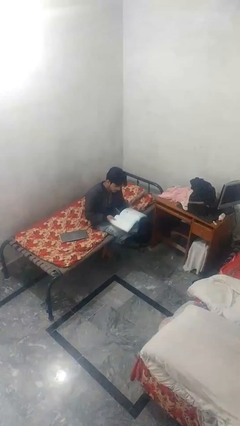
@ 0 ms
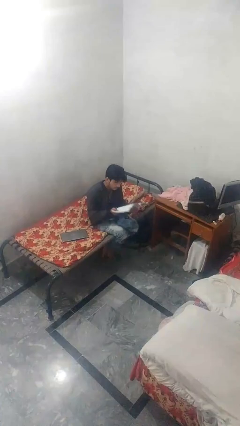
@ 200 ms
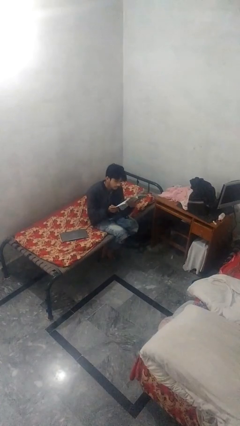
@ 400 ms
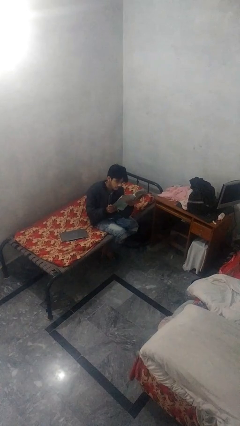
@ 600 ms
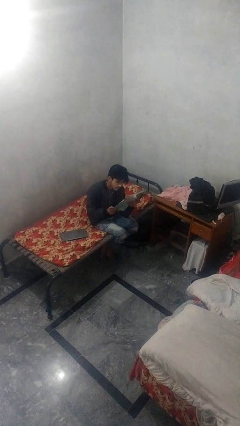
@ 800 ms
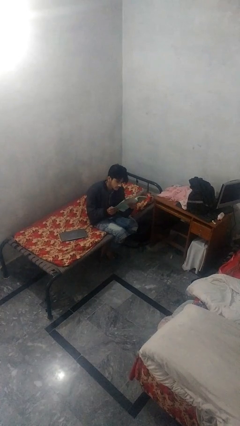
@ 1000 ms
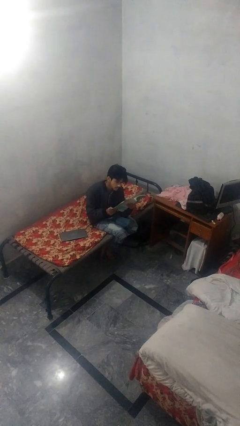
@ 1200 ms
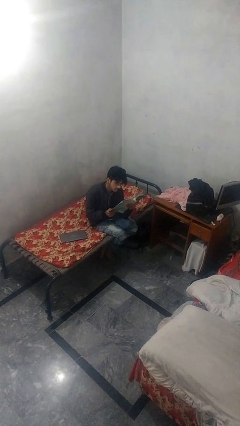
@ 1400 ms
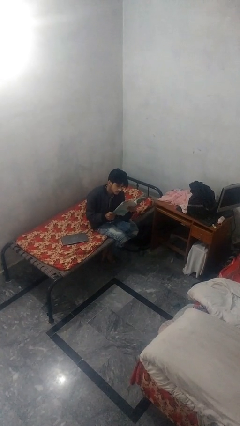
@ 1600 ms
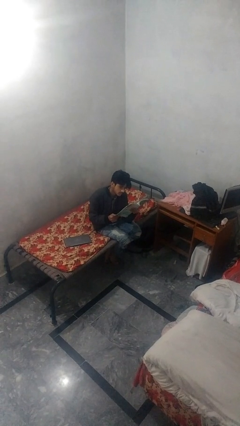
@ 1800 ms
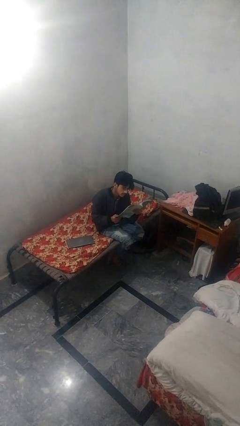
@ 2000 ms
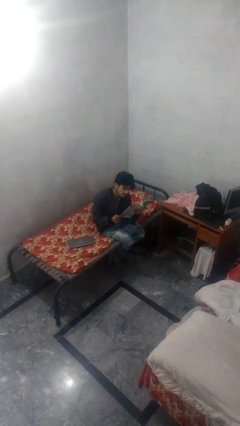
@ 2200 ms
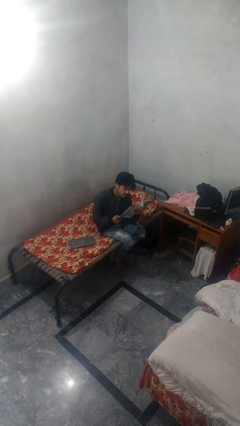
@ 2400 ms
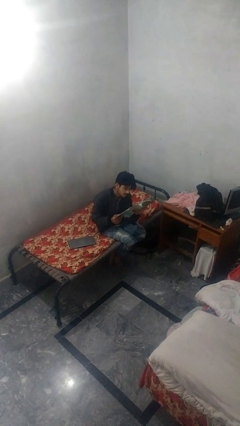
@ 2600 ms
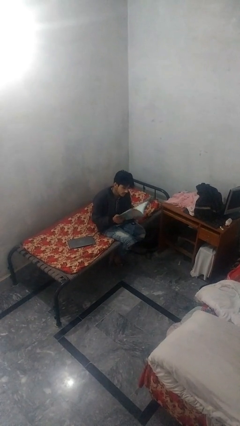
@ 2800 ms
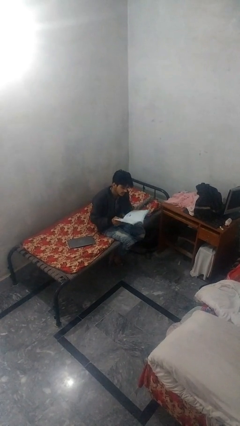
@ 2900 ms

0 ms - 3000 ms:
person reads document

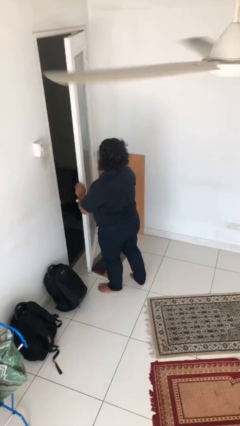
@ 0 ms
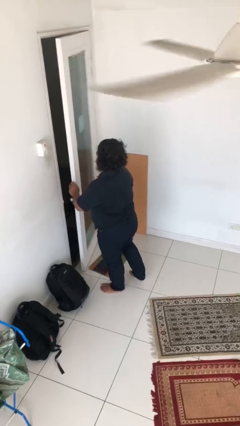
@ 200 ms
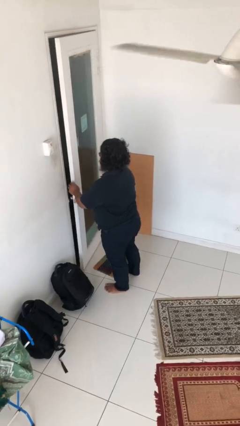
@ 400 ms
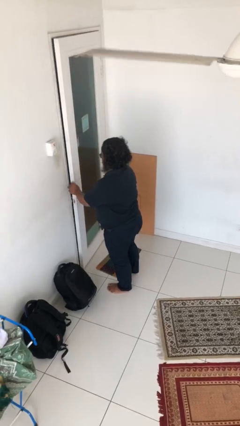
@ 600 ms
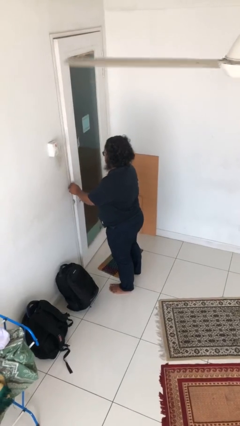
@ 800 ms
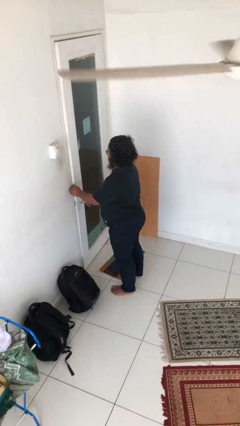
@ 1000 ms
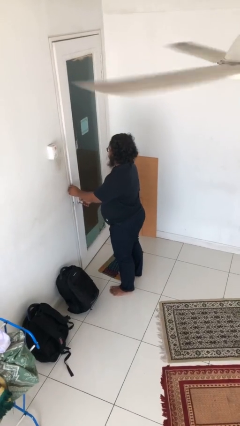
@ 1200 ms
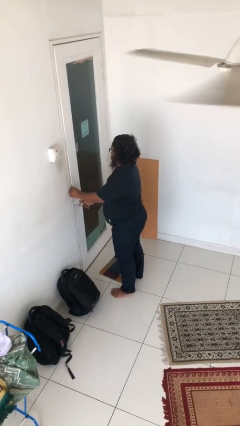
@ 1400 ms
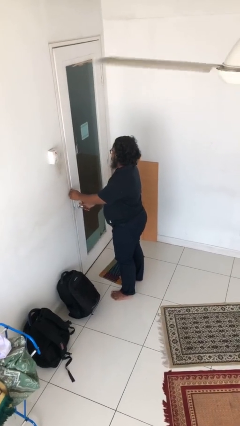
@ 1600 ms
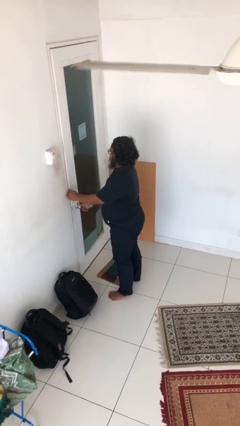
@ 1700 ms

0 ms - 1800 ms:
person closes facility door

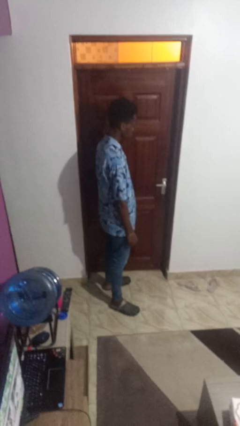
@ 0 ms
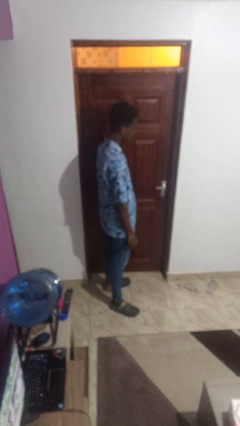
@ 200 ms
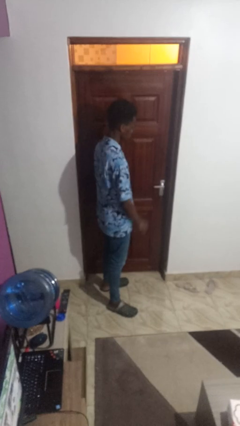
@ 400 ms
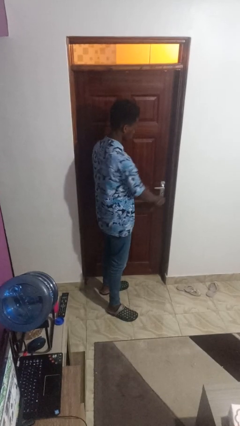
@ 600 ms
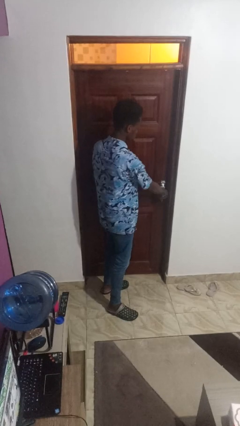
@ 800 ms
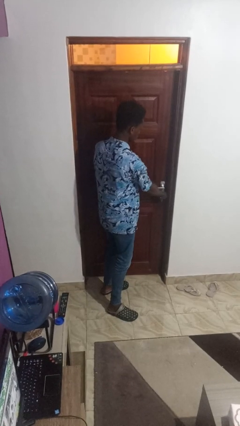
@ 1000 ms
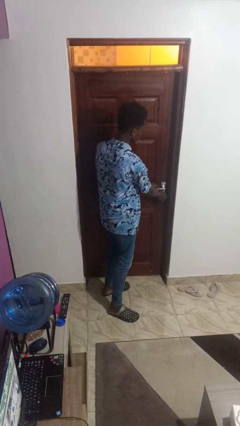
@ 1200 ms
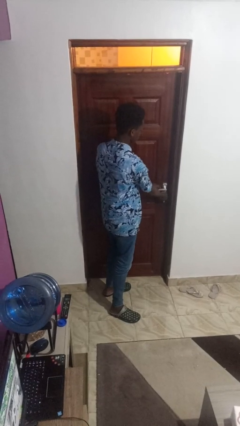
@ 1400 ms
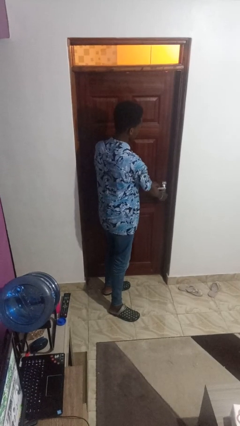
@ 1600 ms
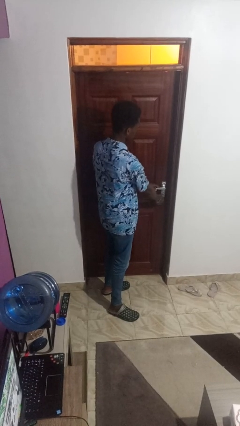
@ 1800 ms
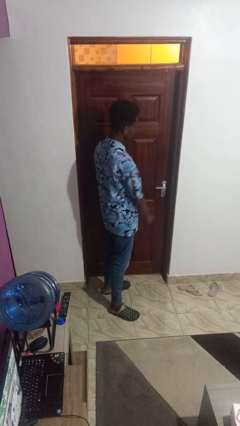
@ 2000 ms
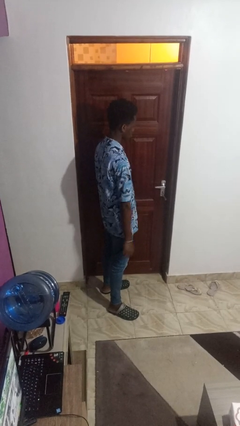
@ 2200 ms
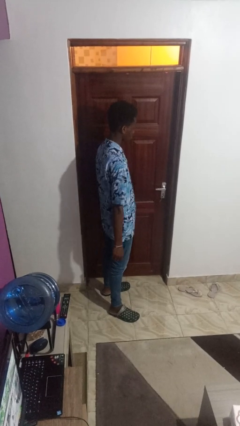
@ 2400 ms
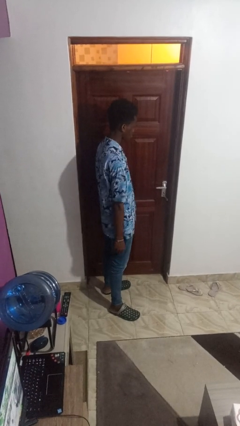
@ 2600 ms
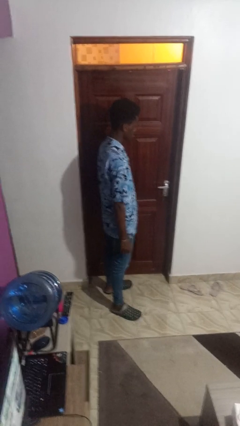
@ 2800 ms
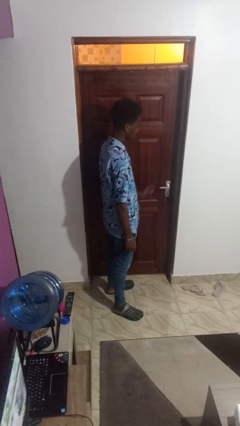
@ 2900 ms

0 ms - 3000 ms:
person unlocks door with keys

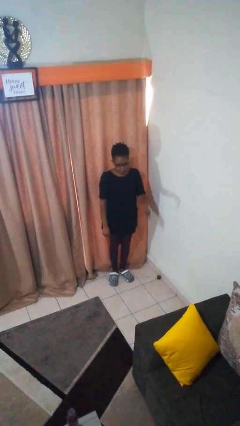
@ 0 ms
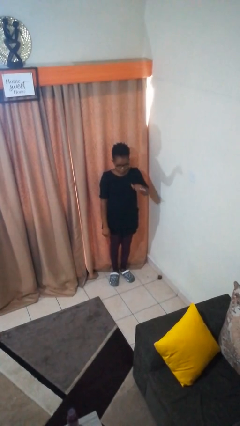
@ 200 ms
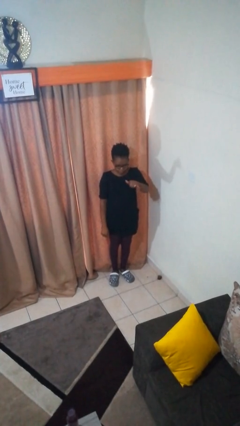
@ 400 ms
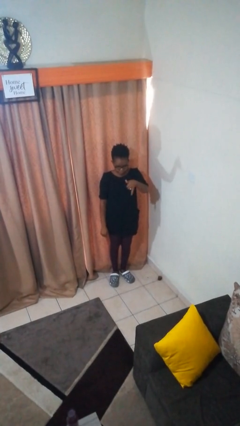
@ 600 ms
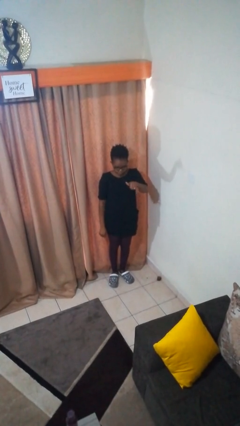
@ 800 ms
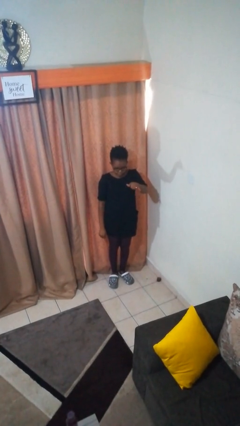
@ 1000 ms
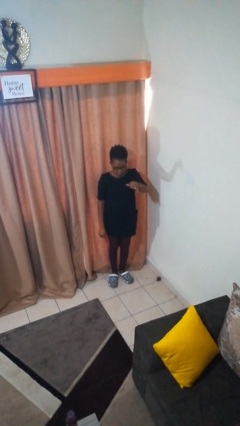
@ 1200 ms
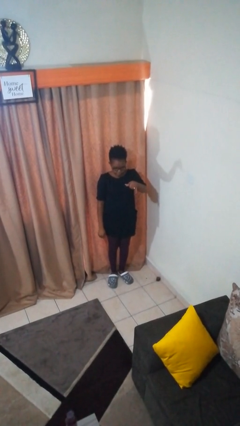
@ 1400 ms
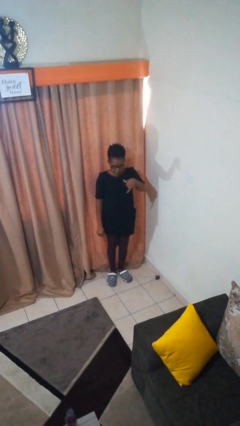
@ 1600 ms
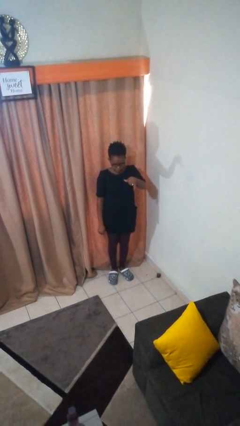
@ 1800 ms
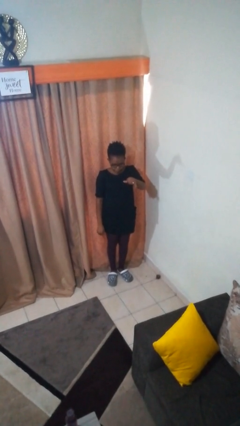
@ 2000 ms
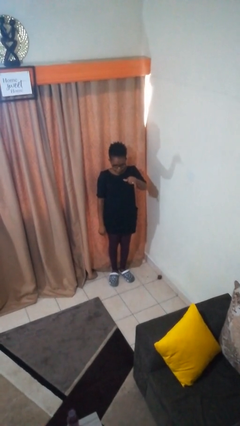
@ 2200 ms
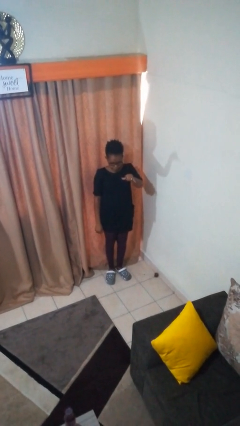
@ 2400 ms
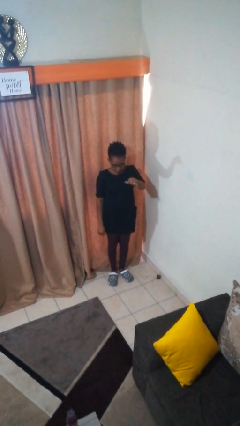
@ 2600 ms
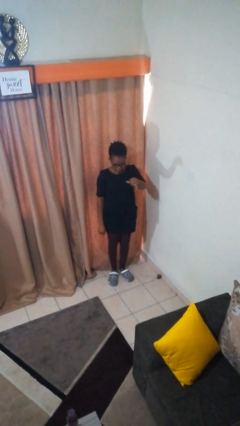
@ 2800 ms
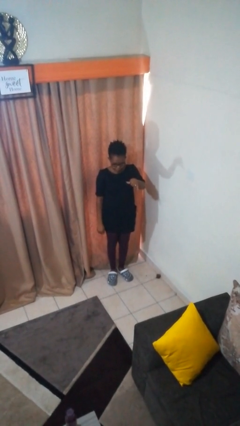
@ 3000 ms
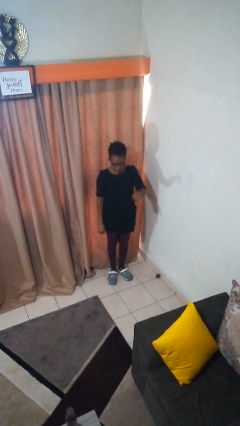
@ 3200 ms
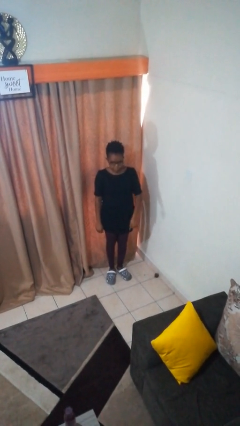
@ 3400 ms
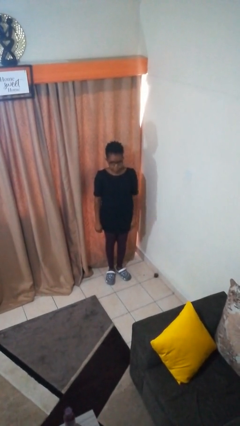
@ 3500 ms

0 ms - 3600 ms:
person gestures hang loose

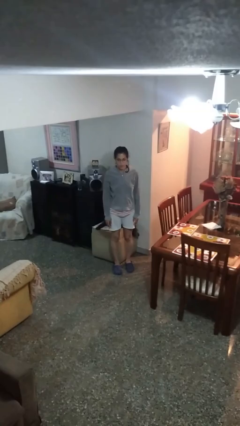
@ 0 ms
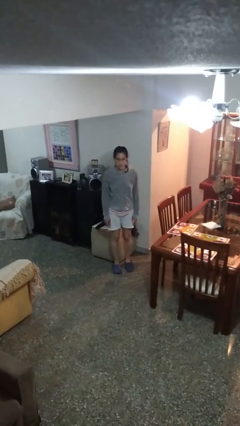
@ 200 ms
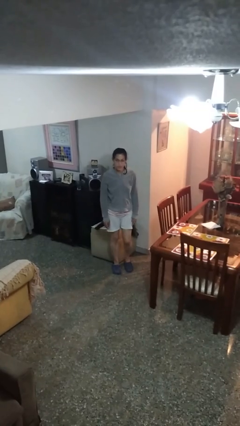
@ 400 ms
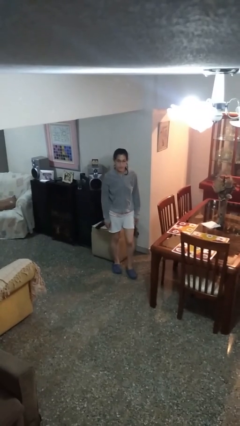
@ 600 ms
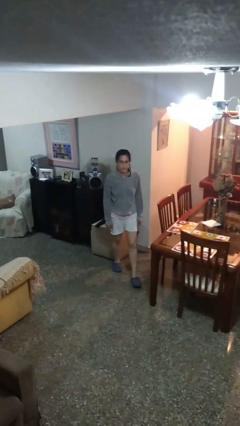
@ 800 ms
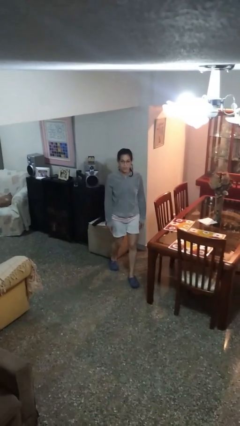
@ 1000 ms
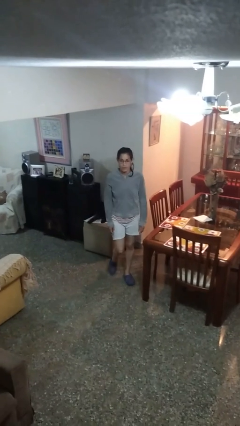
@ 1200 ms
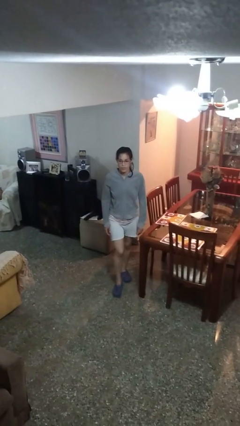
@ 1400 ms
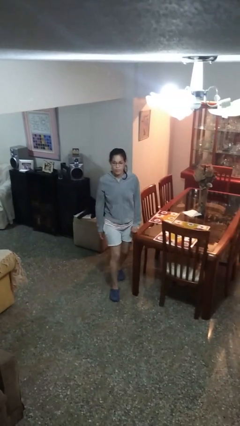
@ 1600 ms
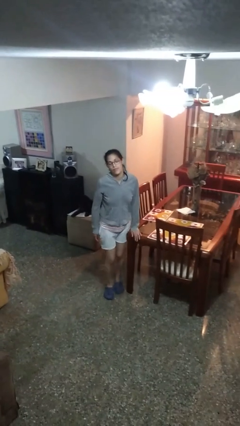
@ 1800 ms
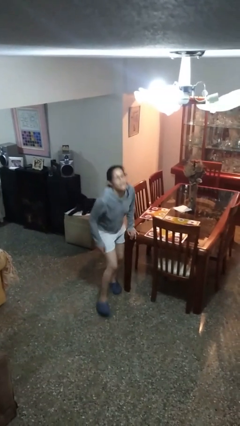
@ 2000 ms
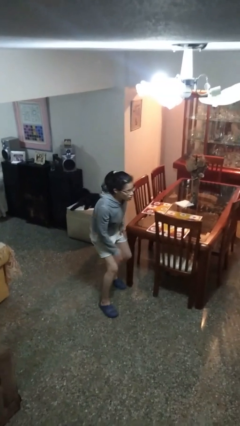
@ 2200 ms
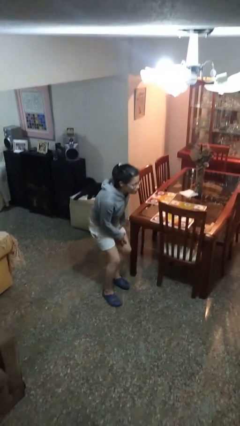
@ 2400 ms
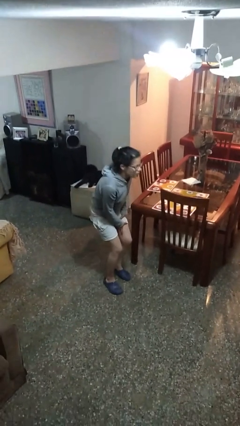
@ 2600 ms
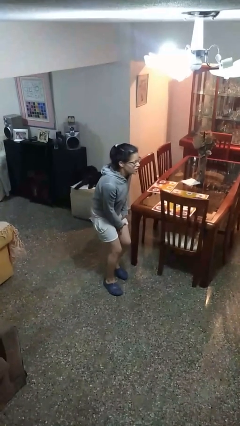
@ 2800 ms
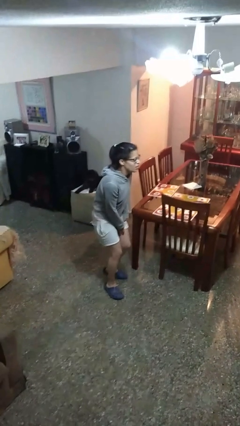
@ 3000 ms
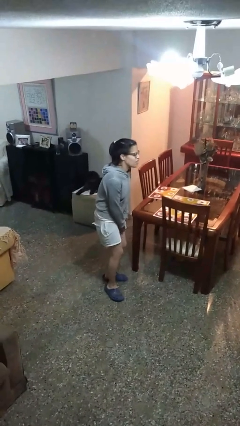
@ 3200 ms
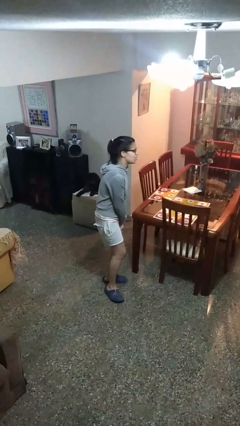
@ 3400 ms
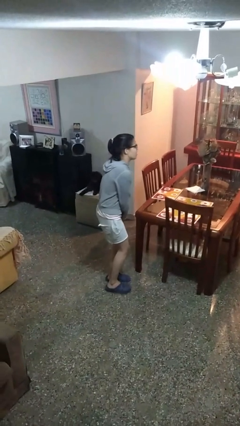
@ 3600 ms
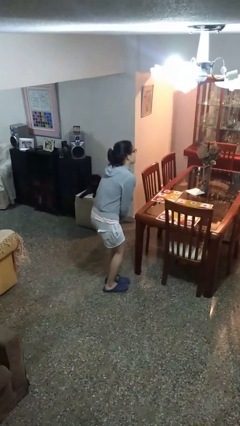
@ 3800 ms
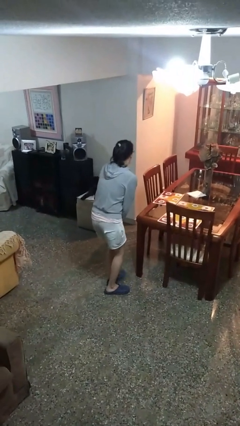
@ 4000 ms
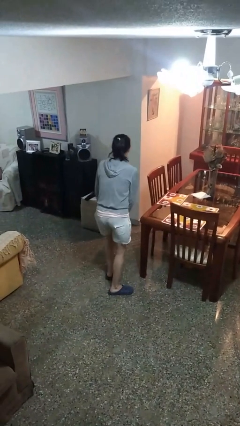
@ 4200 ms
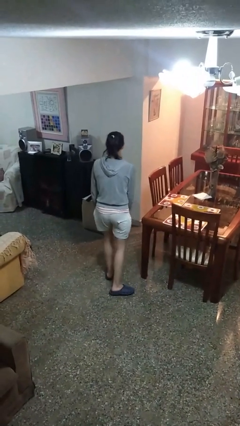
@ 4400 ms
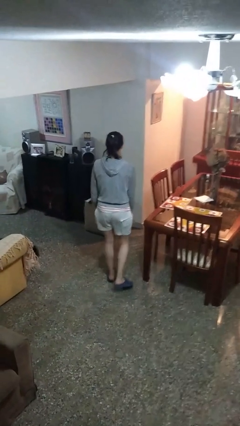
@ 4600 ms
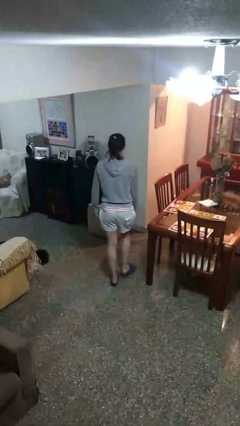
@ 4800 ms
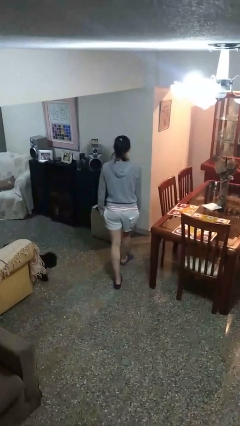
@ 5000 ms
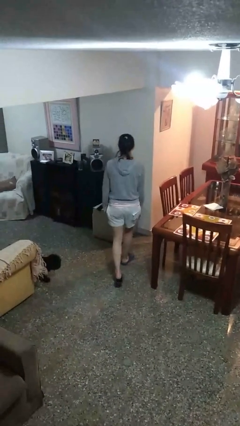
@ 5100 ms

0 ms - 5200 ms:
person bumps into table

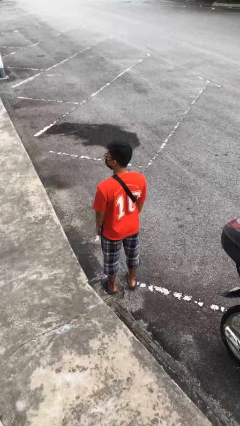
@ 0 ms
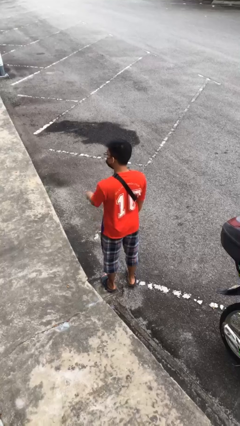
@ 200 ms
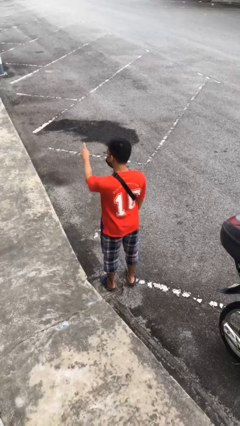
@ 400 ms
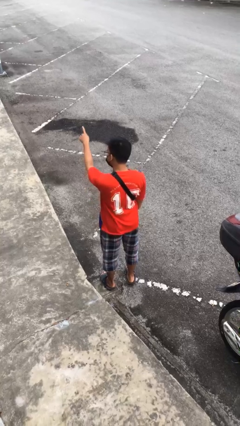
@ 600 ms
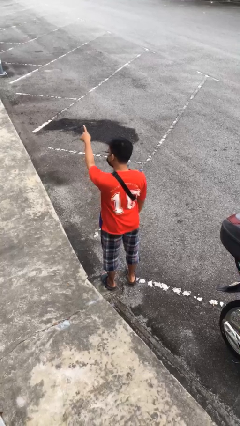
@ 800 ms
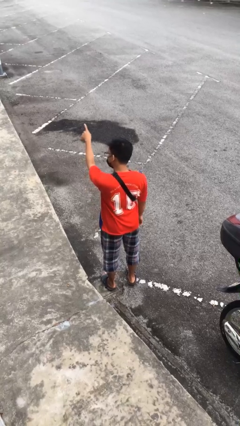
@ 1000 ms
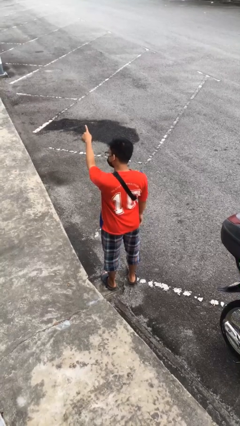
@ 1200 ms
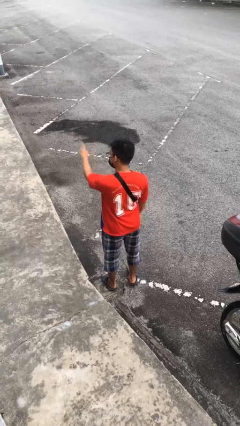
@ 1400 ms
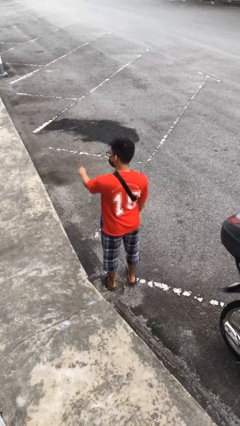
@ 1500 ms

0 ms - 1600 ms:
person points at person
